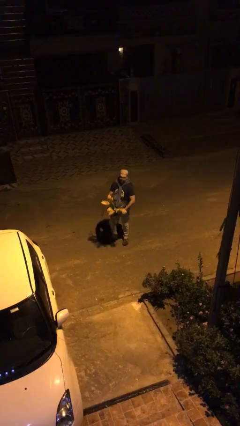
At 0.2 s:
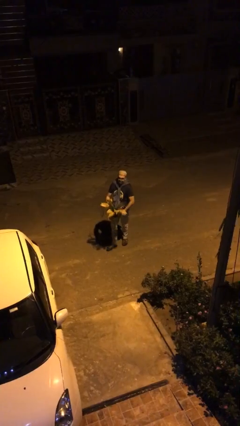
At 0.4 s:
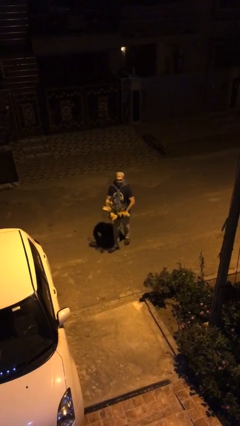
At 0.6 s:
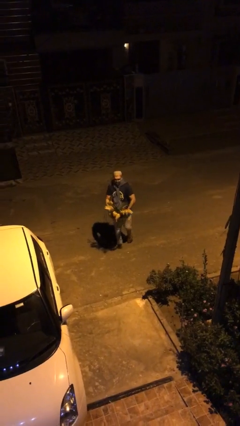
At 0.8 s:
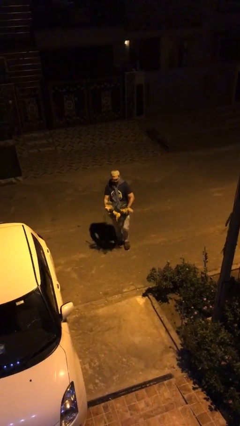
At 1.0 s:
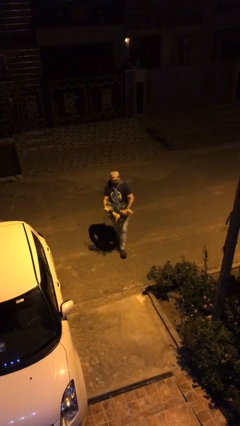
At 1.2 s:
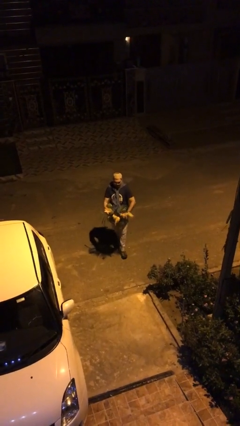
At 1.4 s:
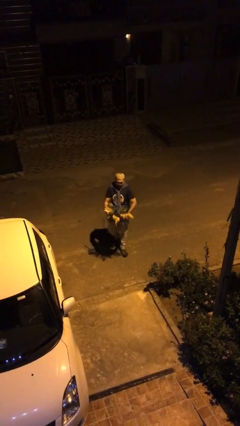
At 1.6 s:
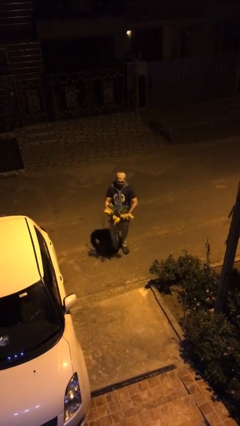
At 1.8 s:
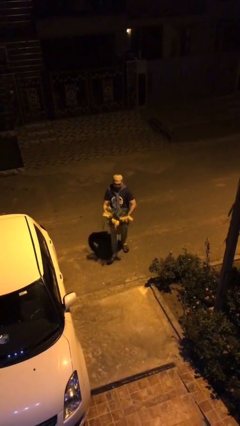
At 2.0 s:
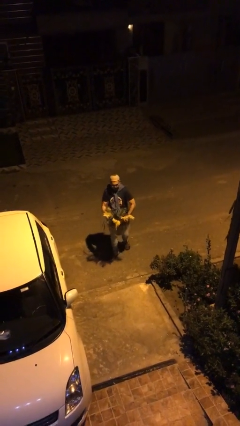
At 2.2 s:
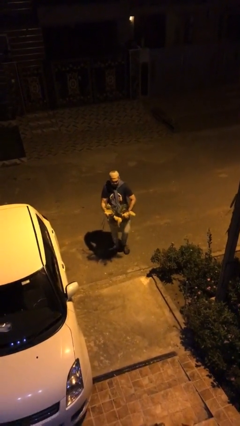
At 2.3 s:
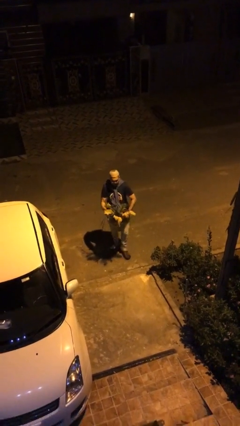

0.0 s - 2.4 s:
person carries heavy object

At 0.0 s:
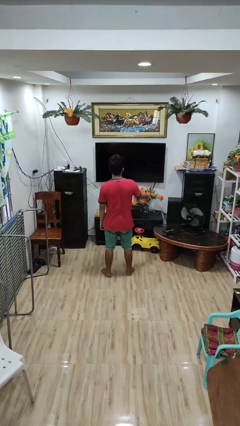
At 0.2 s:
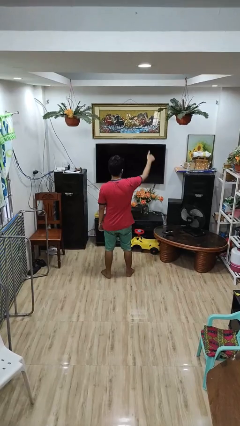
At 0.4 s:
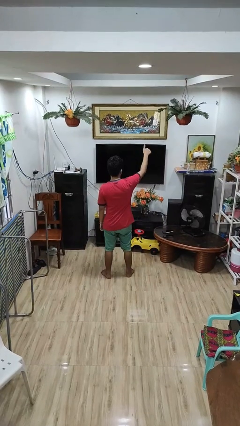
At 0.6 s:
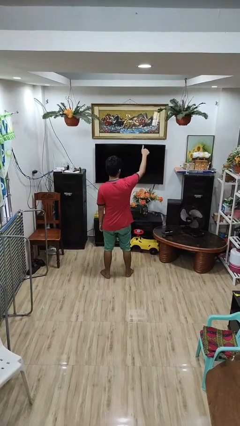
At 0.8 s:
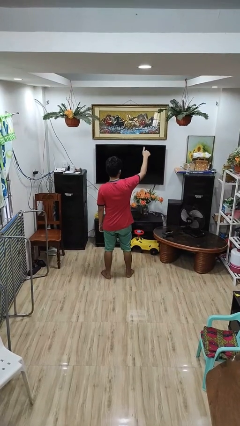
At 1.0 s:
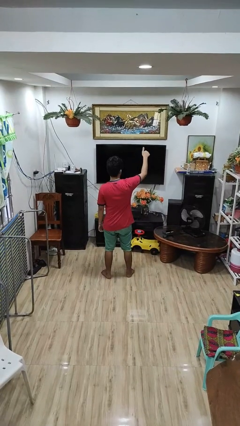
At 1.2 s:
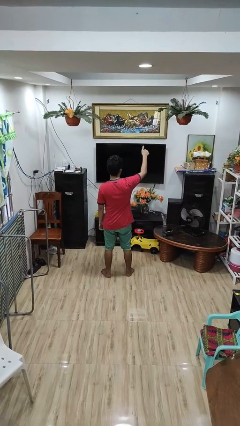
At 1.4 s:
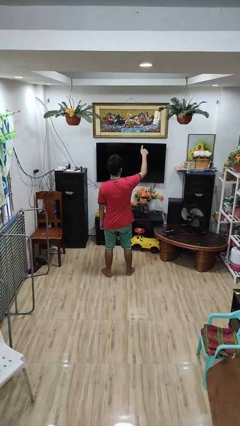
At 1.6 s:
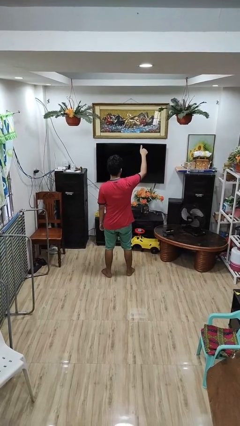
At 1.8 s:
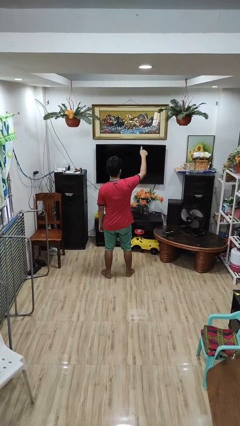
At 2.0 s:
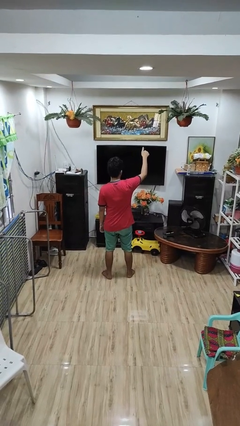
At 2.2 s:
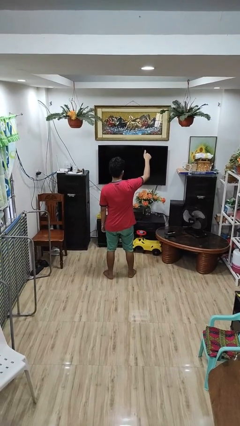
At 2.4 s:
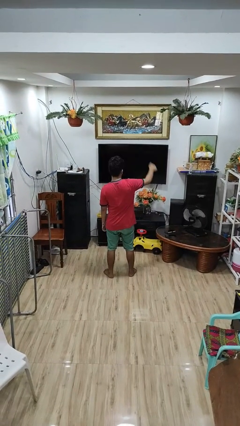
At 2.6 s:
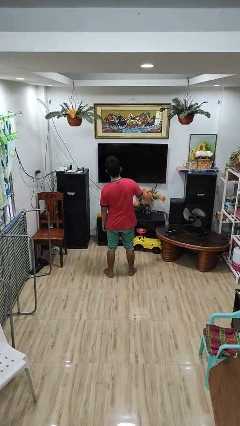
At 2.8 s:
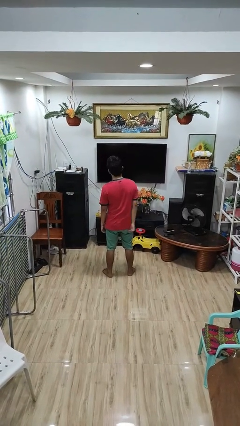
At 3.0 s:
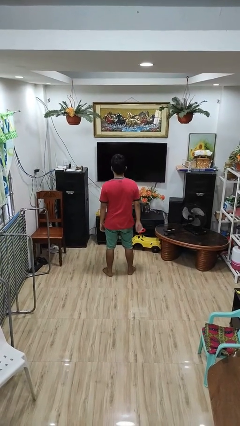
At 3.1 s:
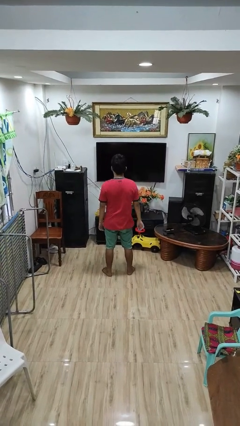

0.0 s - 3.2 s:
person gestures thumbs up

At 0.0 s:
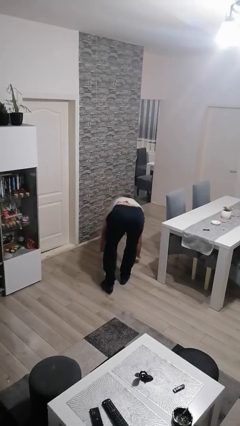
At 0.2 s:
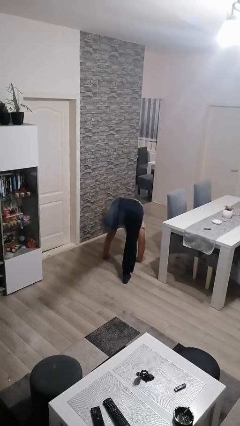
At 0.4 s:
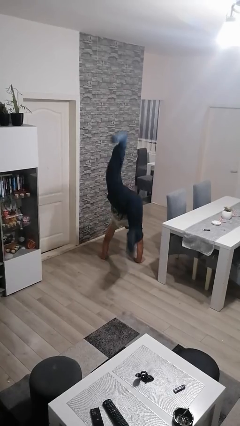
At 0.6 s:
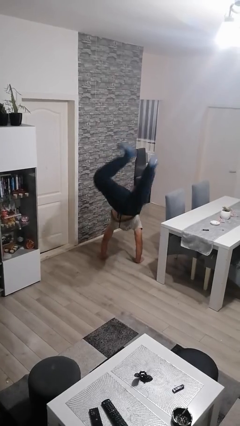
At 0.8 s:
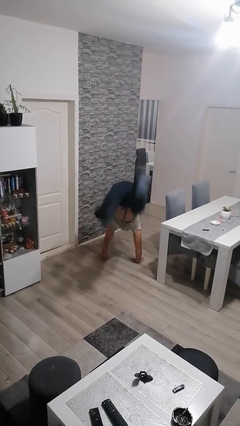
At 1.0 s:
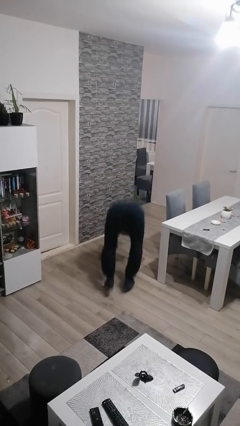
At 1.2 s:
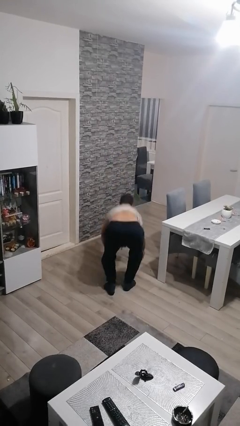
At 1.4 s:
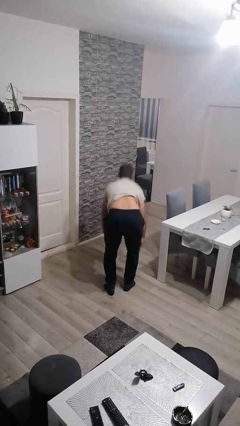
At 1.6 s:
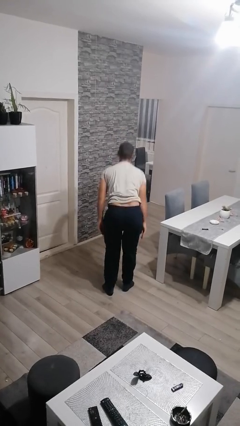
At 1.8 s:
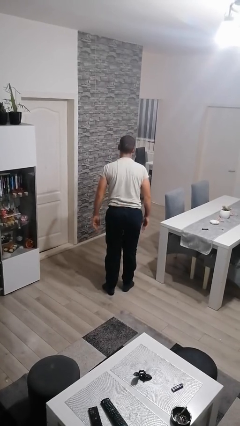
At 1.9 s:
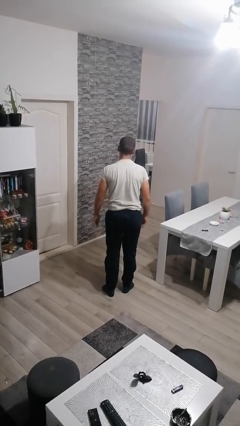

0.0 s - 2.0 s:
person handstand

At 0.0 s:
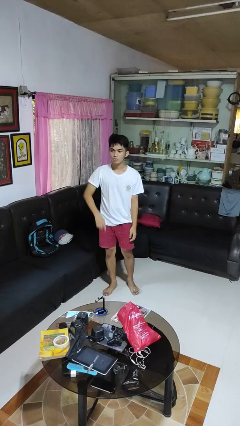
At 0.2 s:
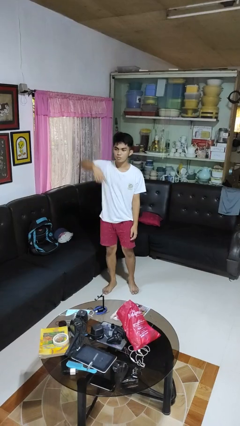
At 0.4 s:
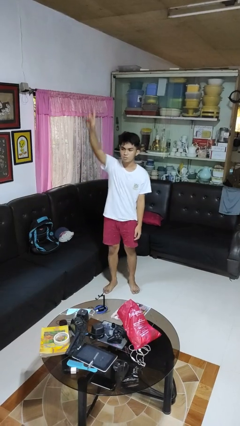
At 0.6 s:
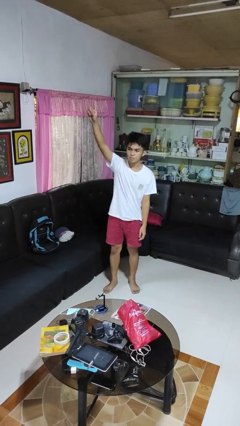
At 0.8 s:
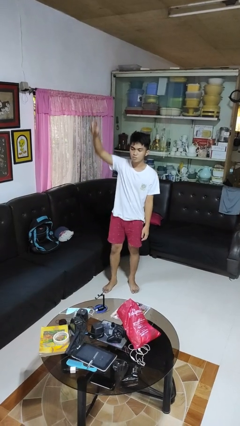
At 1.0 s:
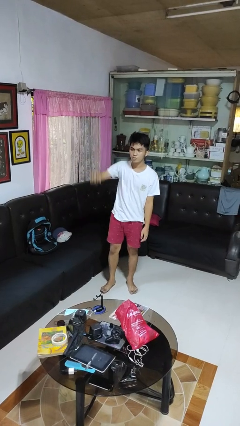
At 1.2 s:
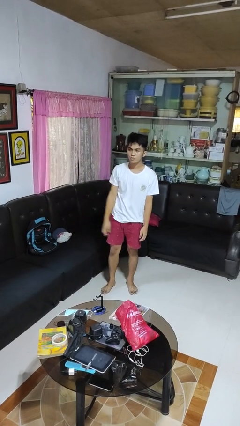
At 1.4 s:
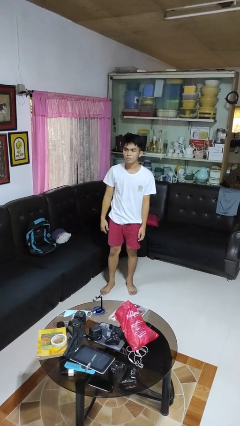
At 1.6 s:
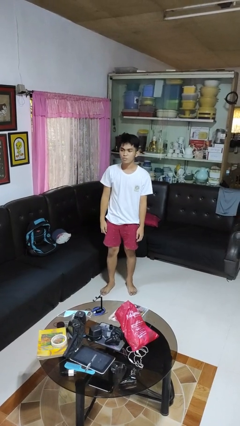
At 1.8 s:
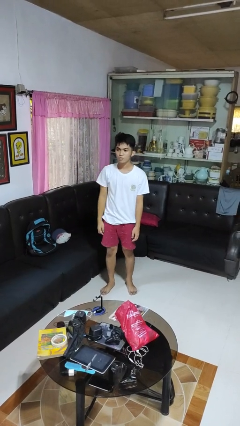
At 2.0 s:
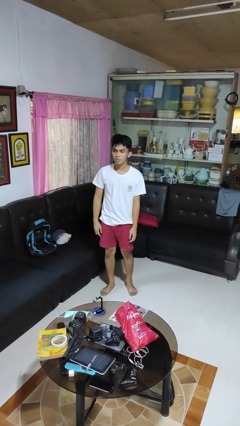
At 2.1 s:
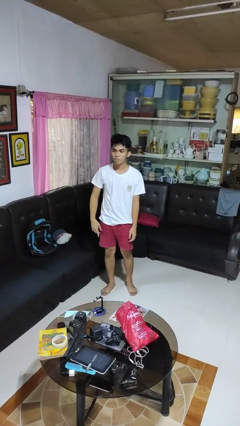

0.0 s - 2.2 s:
person gestures swipe up

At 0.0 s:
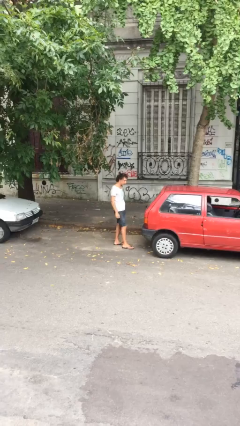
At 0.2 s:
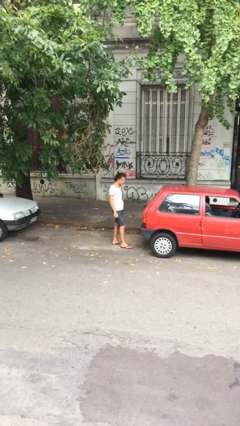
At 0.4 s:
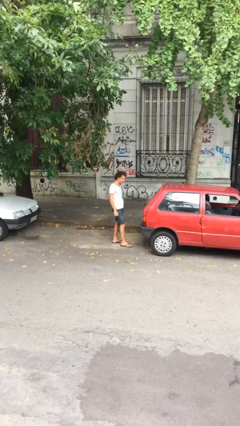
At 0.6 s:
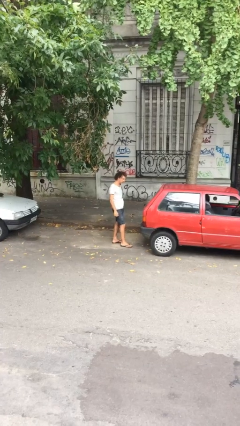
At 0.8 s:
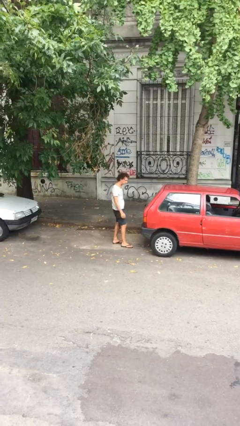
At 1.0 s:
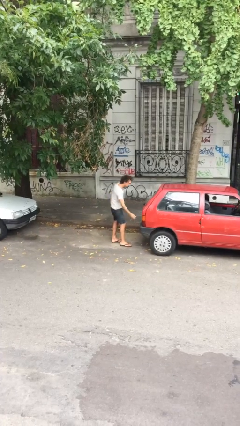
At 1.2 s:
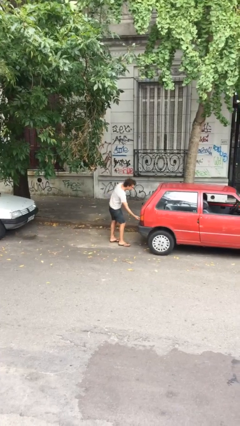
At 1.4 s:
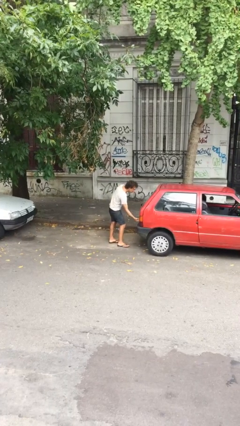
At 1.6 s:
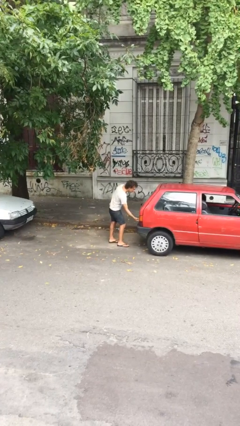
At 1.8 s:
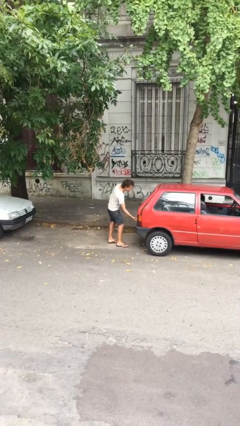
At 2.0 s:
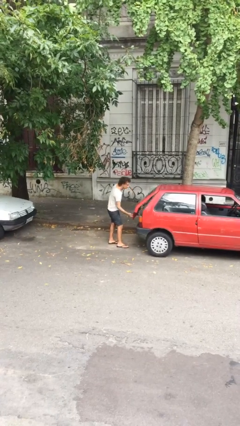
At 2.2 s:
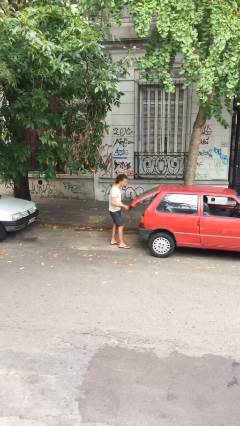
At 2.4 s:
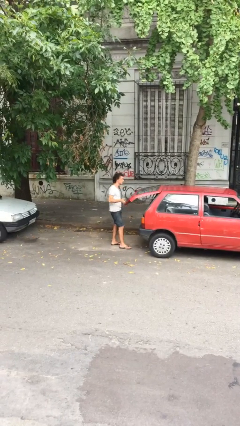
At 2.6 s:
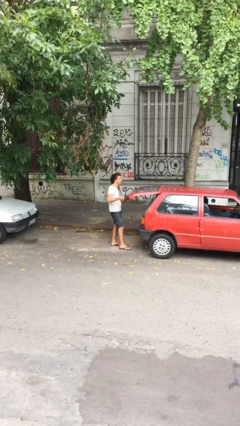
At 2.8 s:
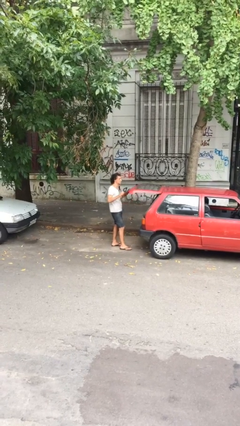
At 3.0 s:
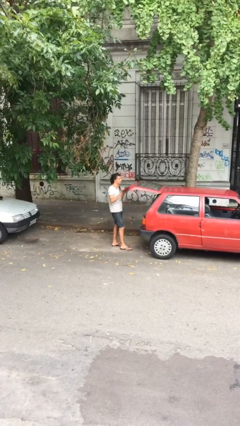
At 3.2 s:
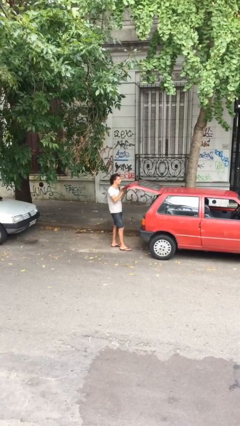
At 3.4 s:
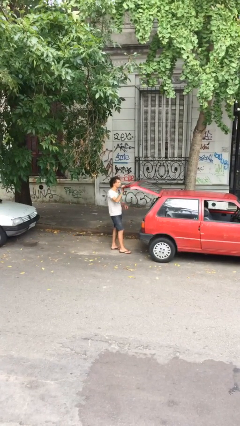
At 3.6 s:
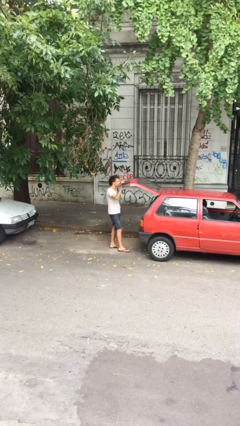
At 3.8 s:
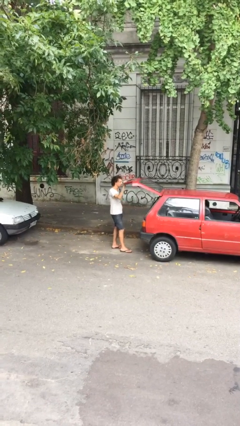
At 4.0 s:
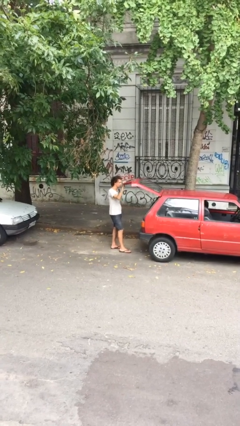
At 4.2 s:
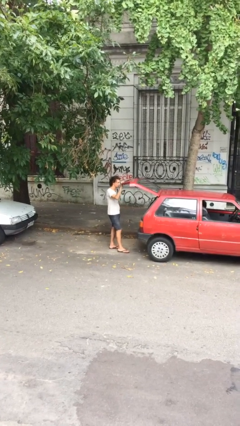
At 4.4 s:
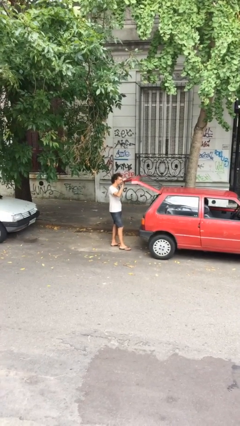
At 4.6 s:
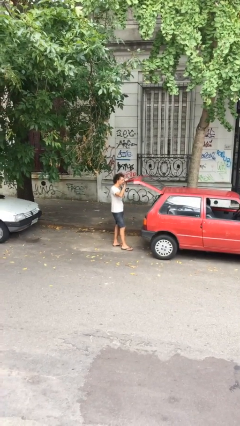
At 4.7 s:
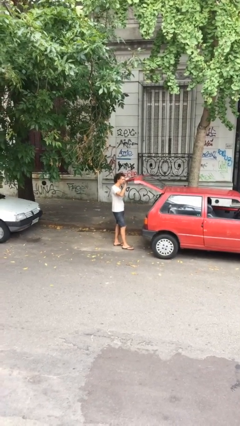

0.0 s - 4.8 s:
person opens car trunk

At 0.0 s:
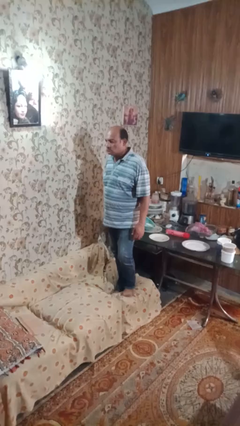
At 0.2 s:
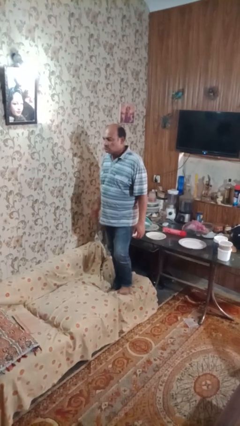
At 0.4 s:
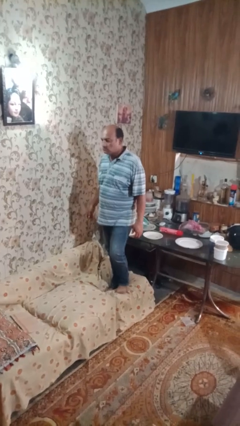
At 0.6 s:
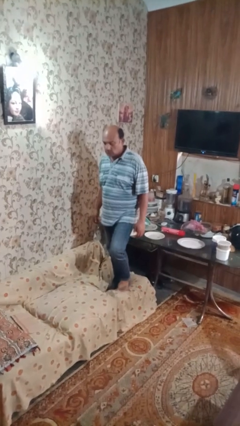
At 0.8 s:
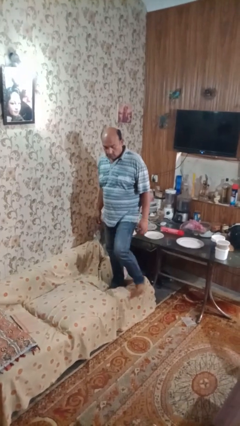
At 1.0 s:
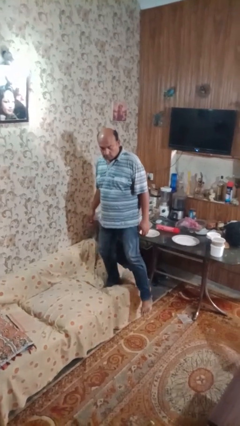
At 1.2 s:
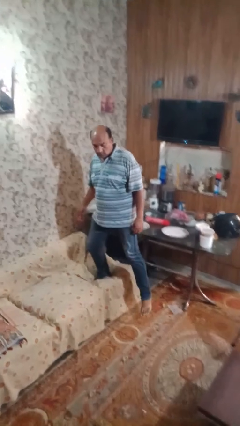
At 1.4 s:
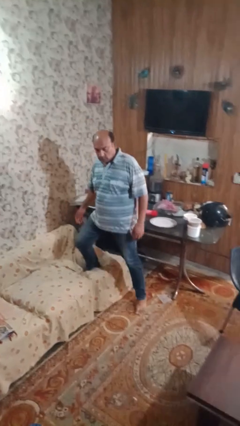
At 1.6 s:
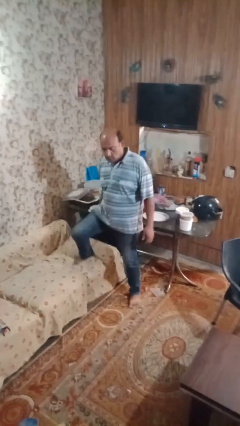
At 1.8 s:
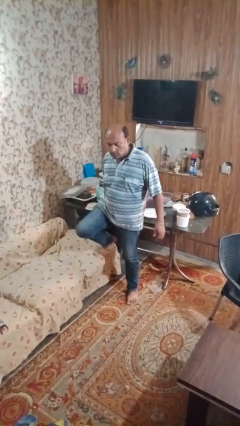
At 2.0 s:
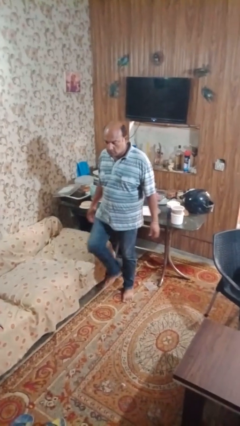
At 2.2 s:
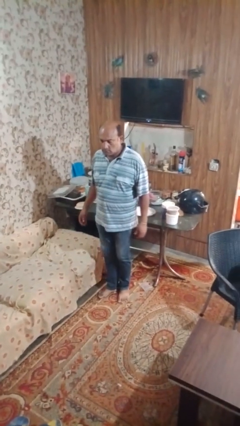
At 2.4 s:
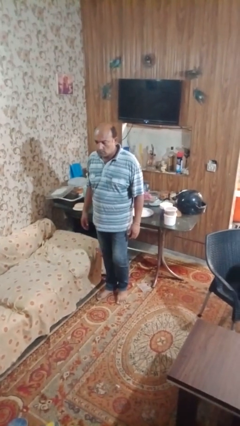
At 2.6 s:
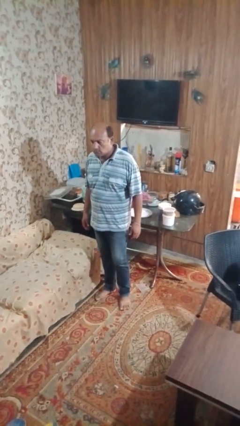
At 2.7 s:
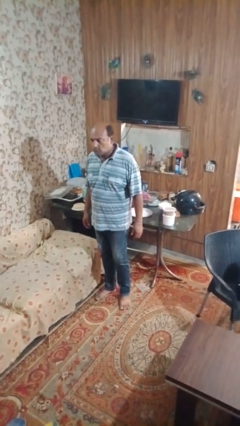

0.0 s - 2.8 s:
person climbs off couch

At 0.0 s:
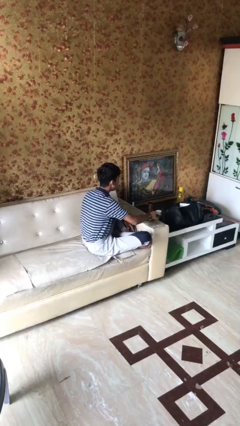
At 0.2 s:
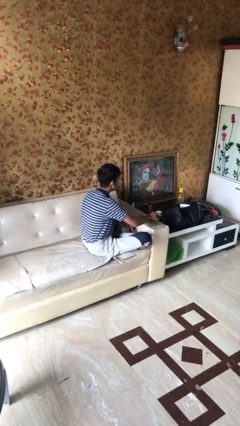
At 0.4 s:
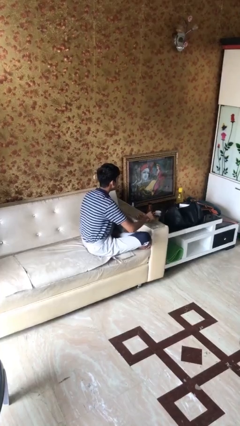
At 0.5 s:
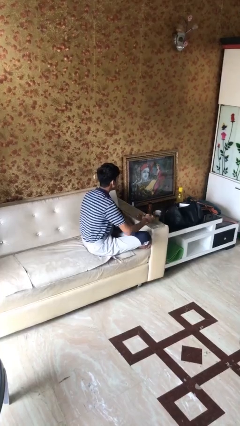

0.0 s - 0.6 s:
person eats with hands
